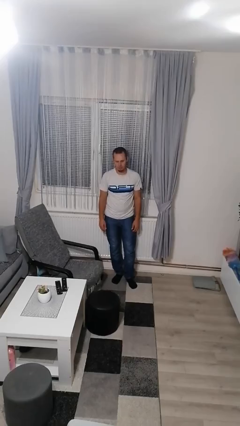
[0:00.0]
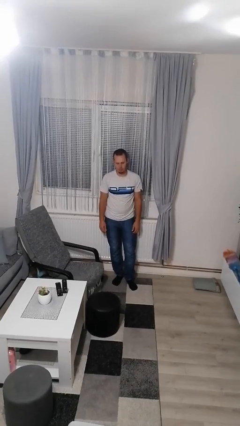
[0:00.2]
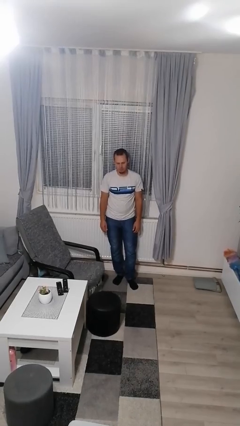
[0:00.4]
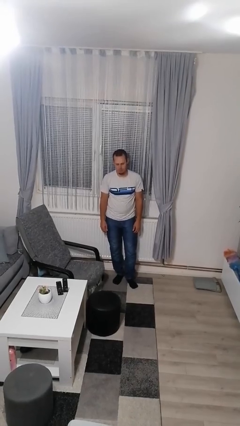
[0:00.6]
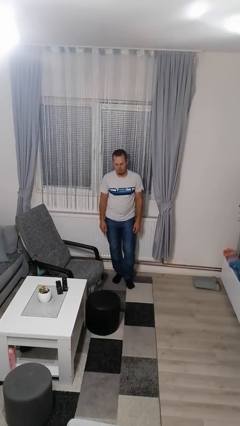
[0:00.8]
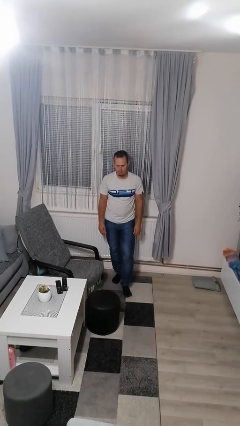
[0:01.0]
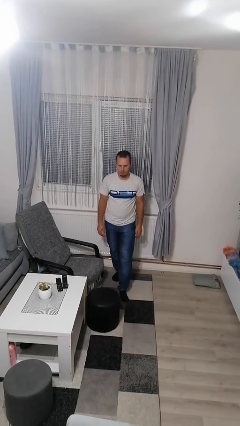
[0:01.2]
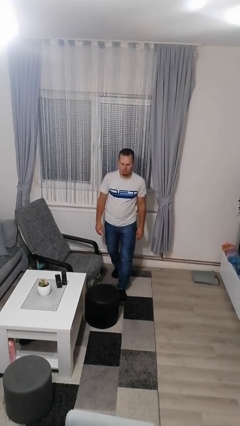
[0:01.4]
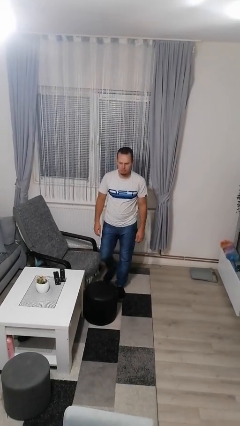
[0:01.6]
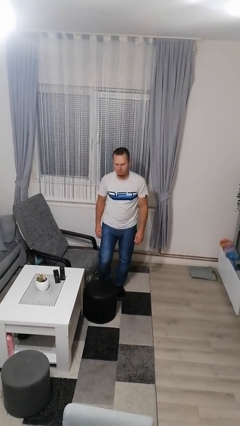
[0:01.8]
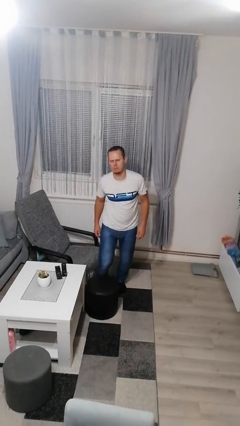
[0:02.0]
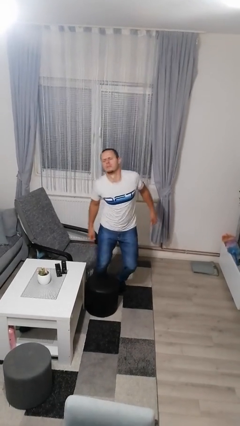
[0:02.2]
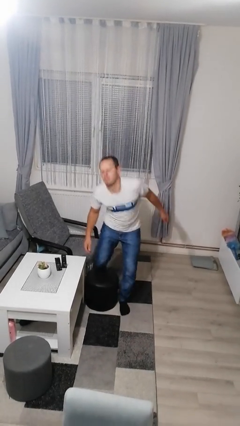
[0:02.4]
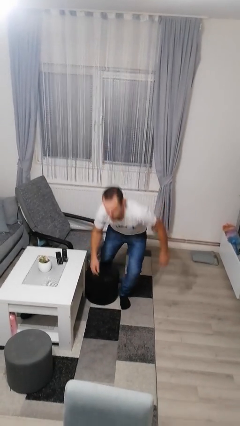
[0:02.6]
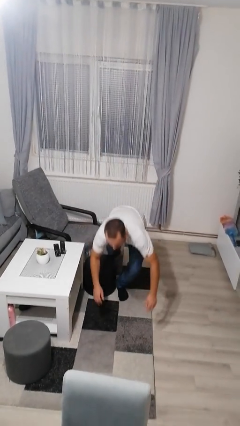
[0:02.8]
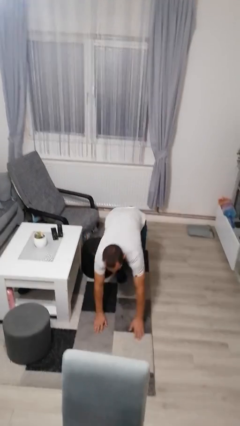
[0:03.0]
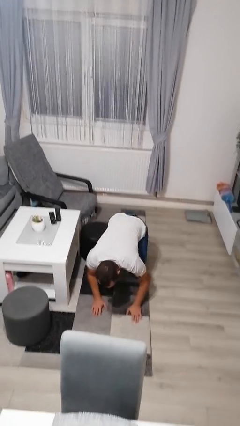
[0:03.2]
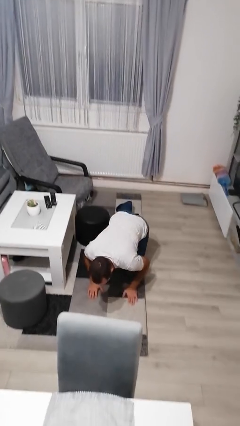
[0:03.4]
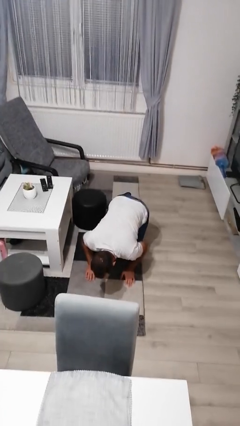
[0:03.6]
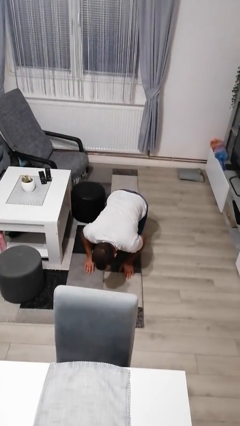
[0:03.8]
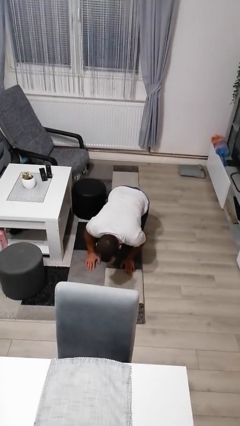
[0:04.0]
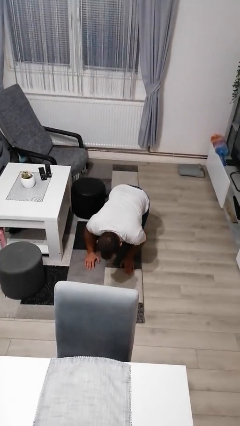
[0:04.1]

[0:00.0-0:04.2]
person trips on object on floor

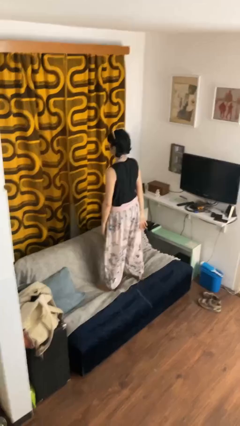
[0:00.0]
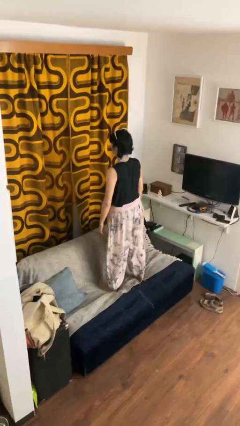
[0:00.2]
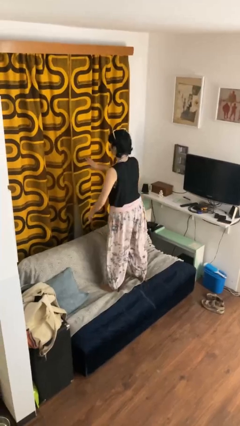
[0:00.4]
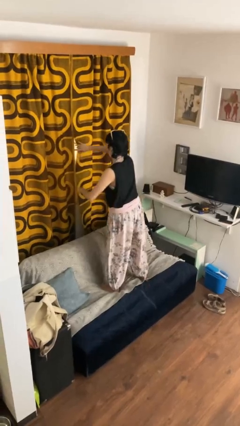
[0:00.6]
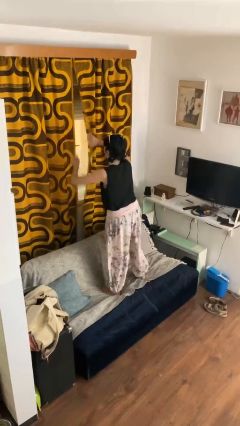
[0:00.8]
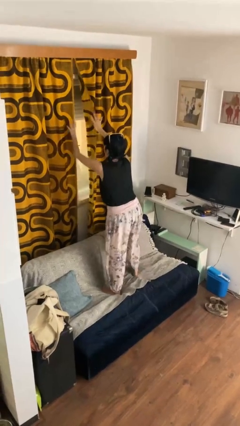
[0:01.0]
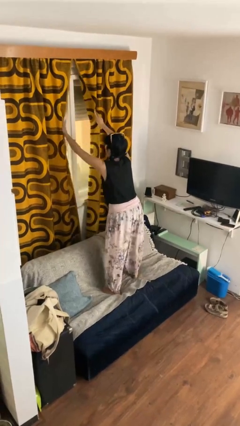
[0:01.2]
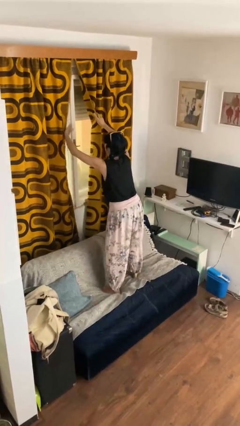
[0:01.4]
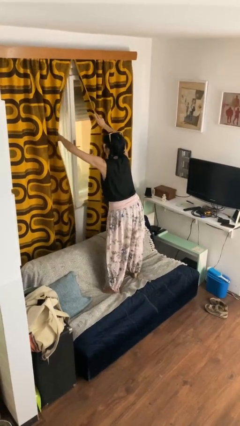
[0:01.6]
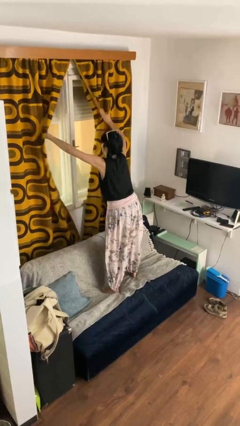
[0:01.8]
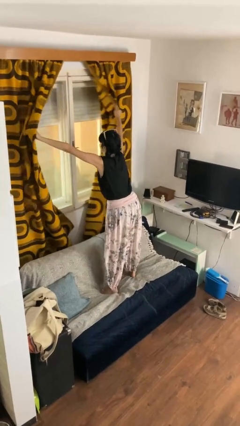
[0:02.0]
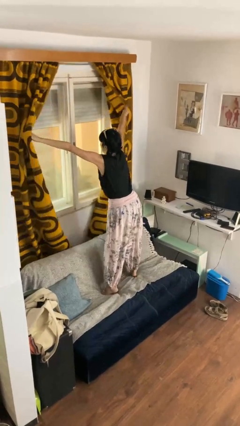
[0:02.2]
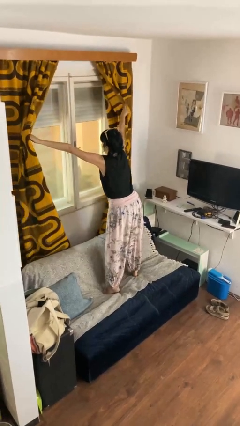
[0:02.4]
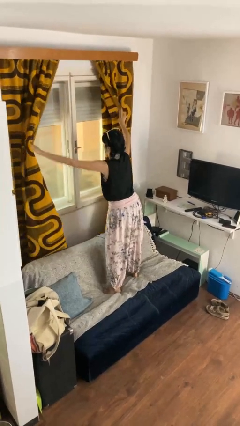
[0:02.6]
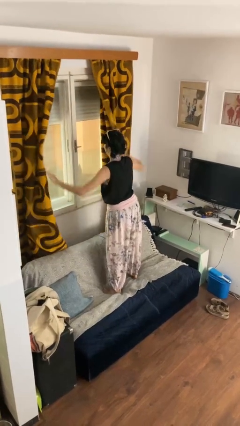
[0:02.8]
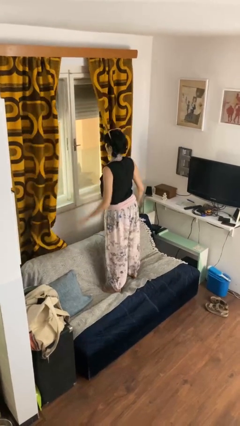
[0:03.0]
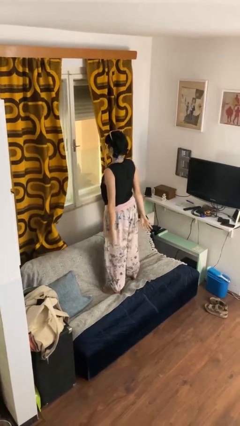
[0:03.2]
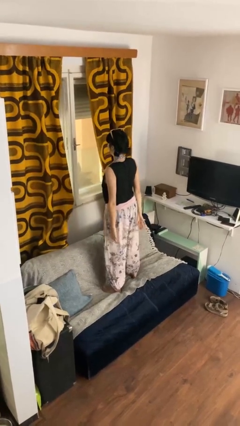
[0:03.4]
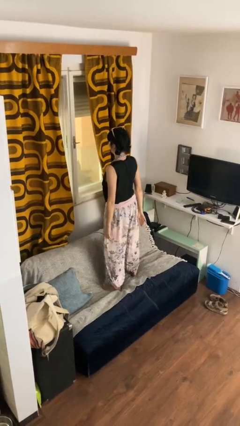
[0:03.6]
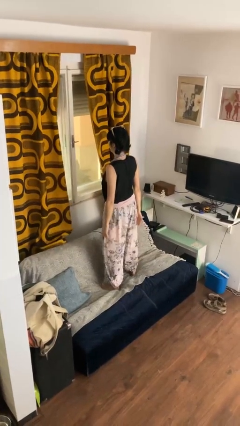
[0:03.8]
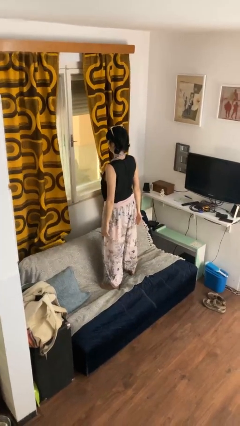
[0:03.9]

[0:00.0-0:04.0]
person opens curtains

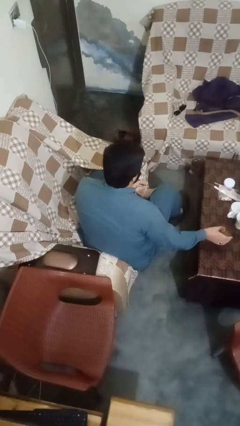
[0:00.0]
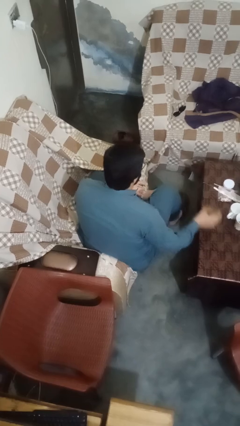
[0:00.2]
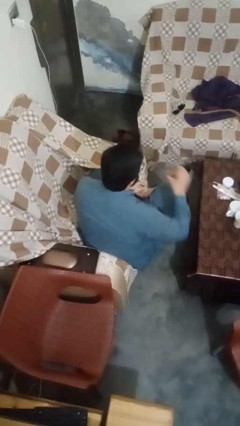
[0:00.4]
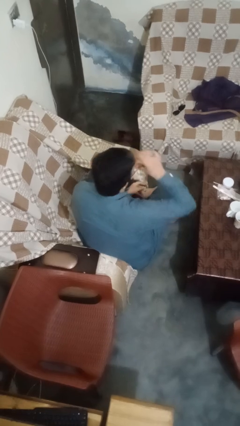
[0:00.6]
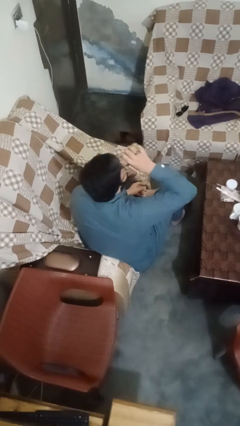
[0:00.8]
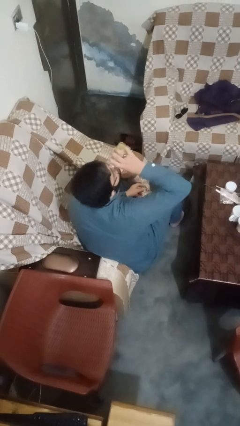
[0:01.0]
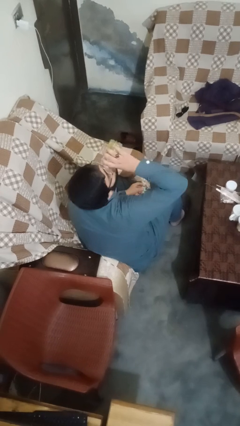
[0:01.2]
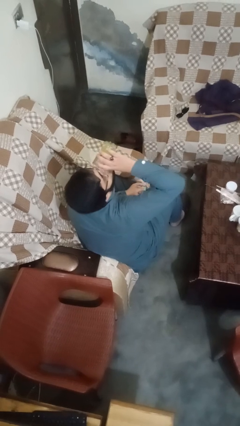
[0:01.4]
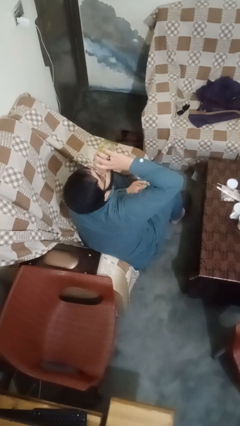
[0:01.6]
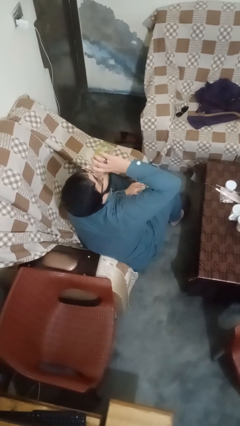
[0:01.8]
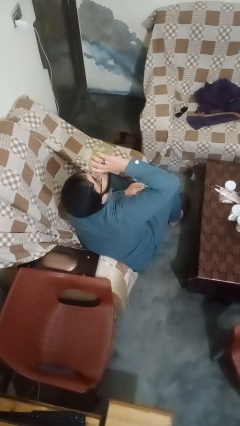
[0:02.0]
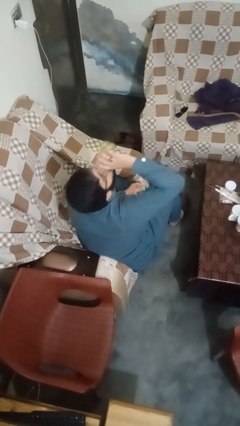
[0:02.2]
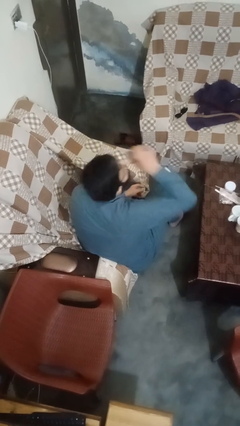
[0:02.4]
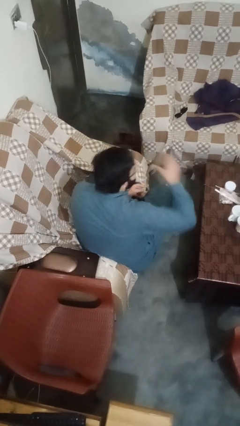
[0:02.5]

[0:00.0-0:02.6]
person drinks from cup

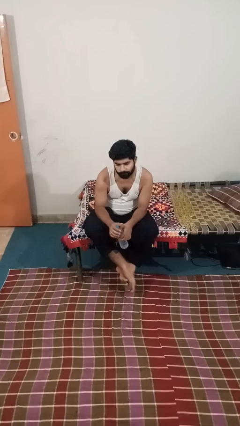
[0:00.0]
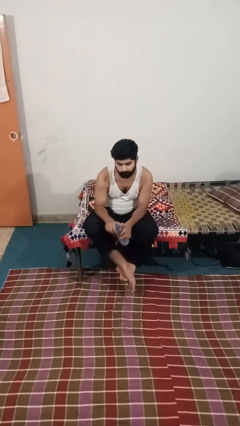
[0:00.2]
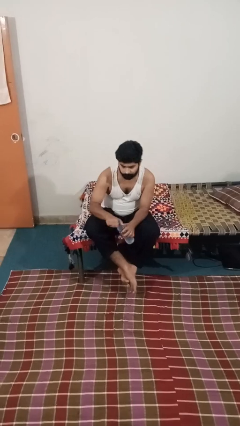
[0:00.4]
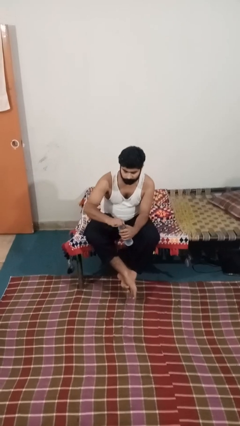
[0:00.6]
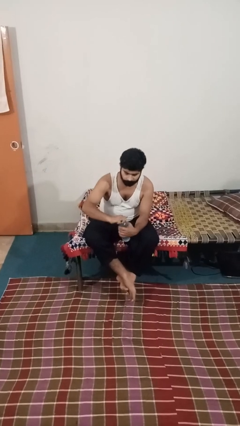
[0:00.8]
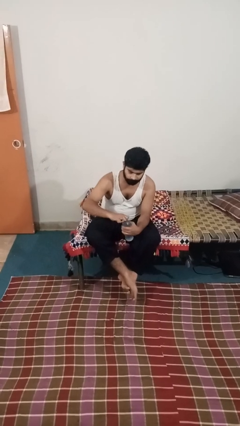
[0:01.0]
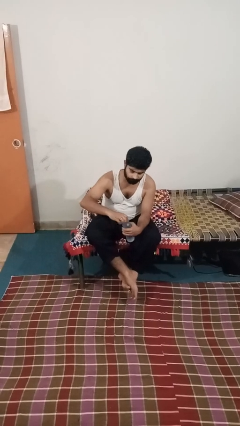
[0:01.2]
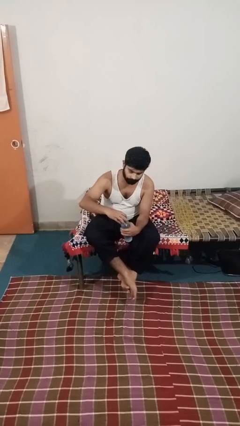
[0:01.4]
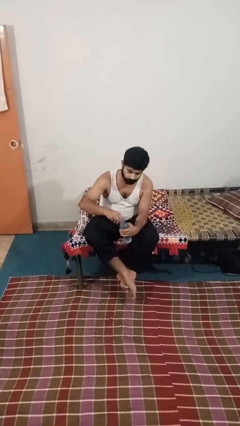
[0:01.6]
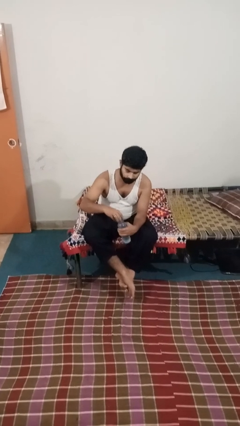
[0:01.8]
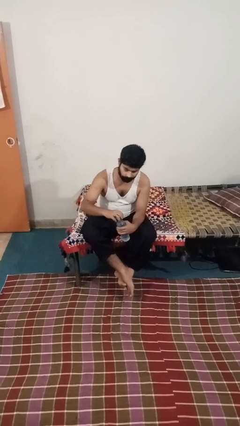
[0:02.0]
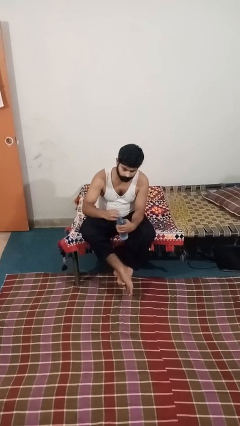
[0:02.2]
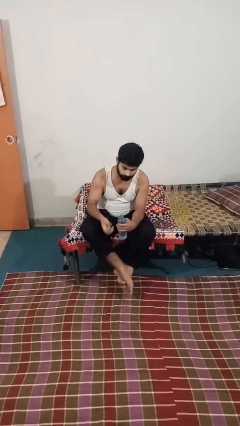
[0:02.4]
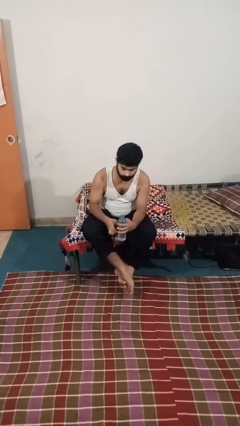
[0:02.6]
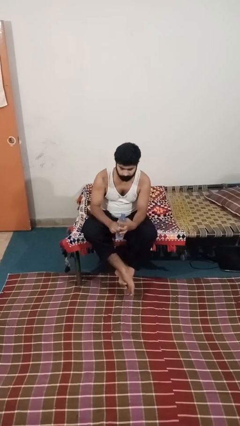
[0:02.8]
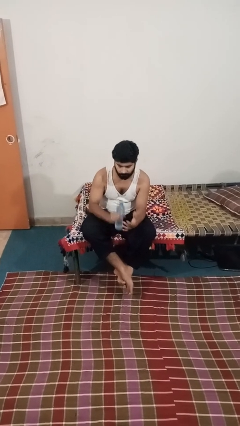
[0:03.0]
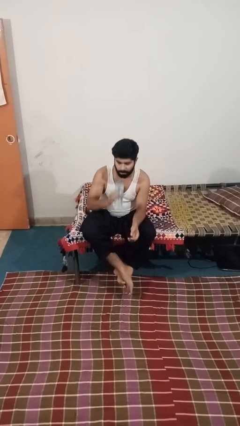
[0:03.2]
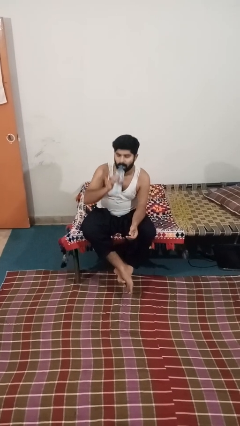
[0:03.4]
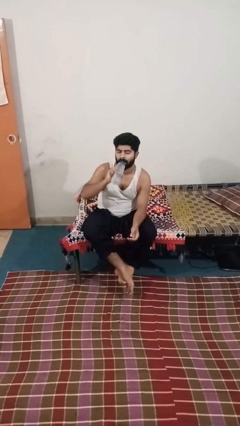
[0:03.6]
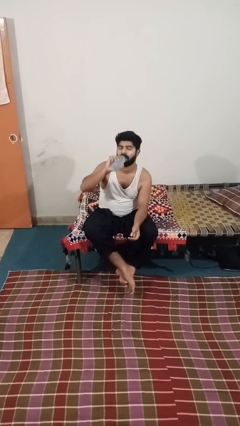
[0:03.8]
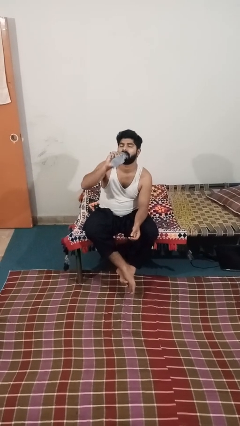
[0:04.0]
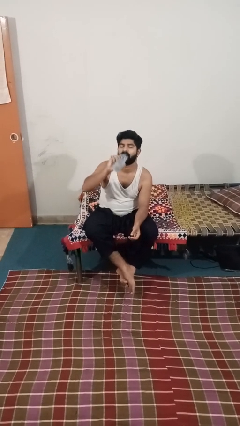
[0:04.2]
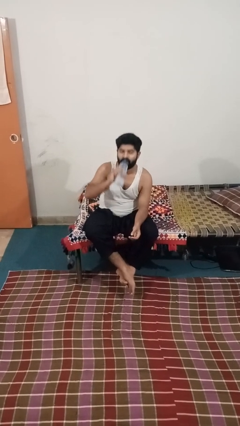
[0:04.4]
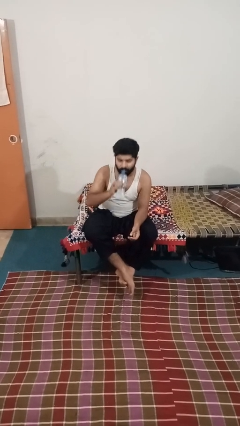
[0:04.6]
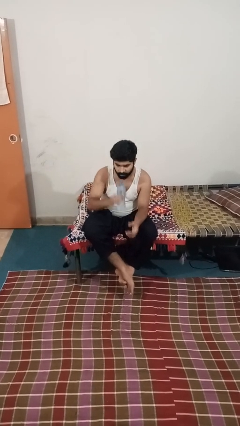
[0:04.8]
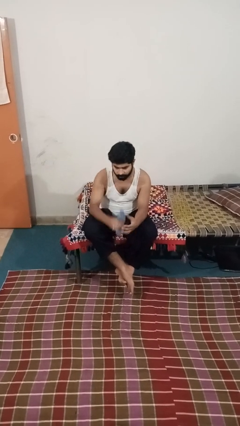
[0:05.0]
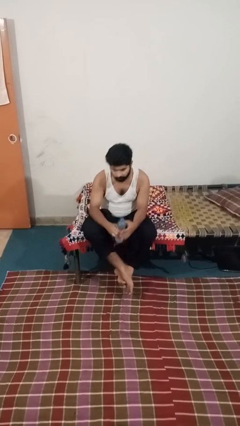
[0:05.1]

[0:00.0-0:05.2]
person drinks from bottle

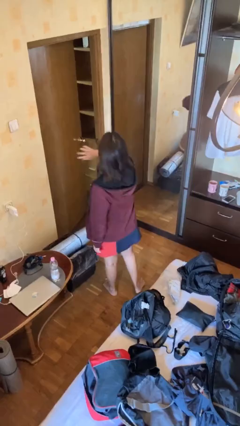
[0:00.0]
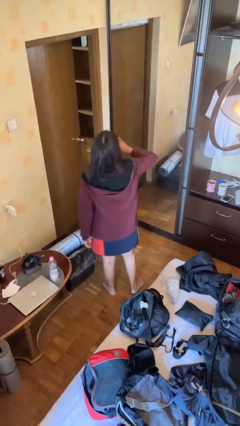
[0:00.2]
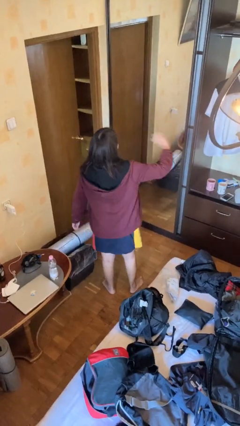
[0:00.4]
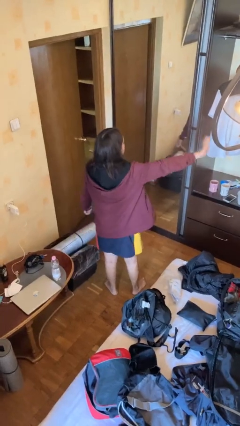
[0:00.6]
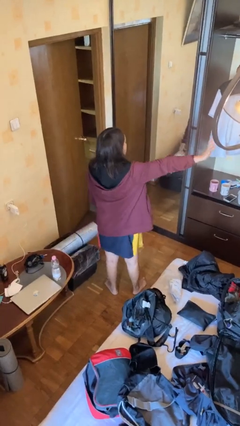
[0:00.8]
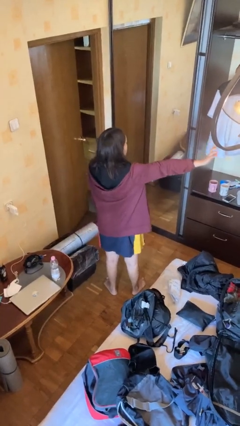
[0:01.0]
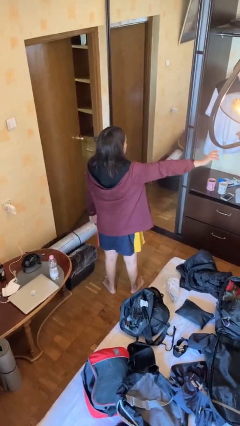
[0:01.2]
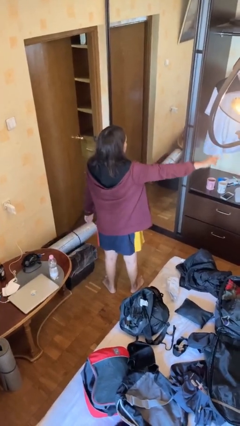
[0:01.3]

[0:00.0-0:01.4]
person gestures swipe right

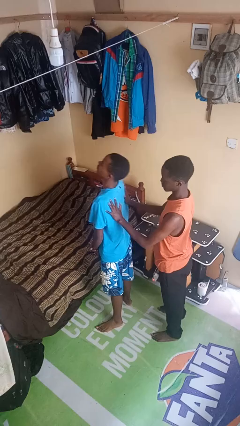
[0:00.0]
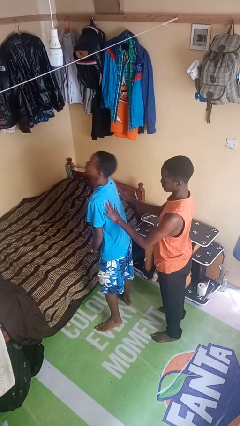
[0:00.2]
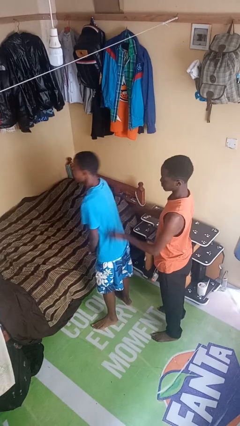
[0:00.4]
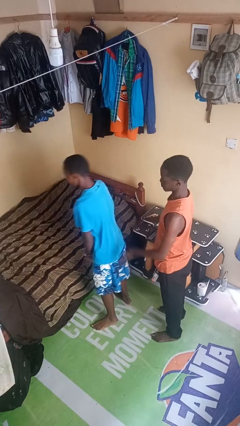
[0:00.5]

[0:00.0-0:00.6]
person shoves person
